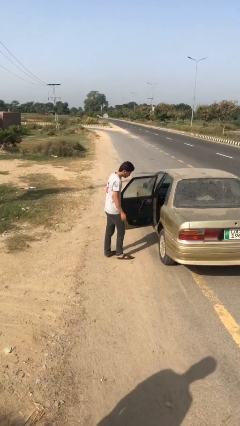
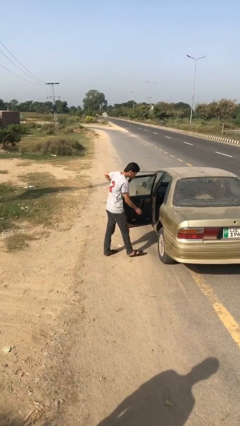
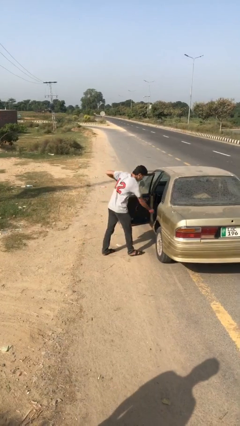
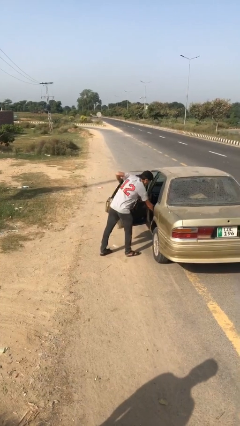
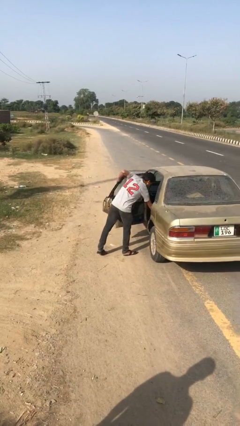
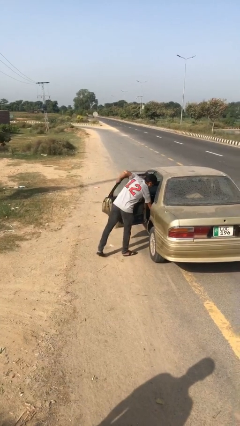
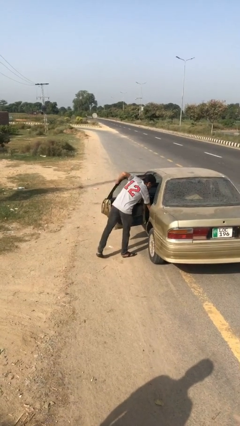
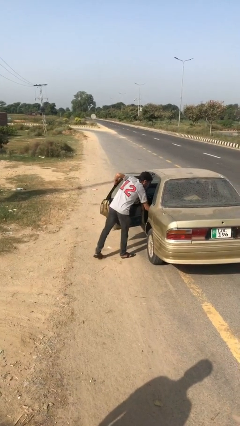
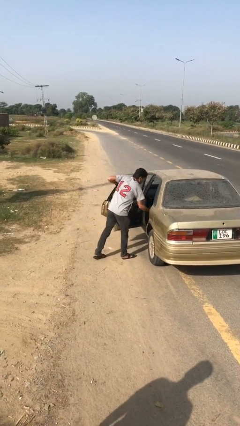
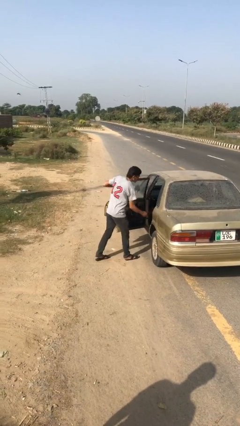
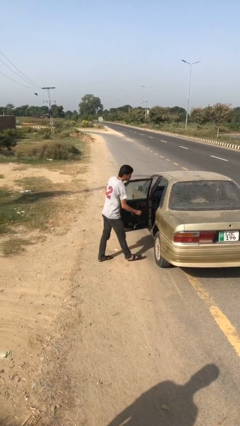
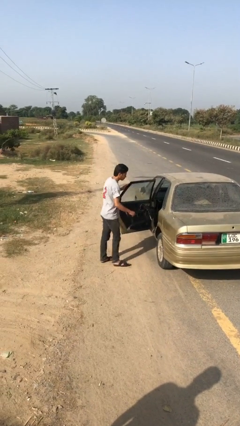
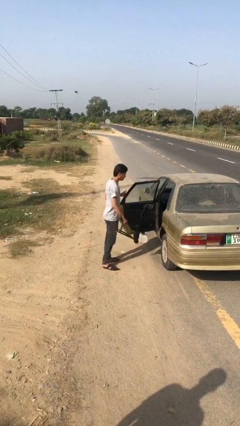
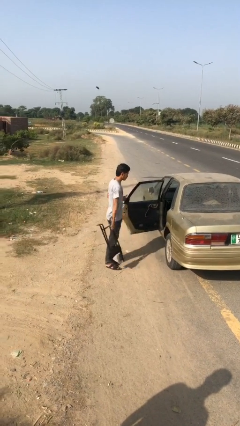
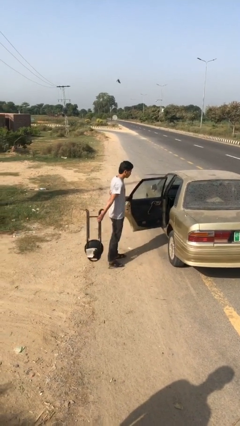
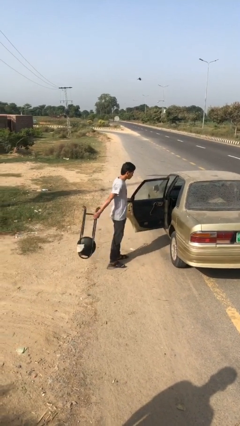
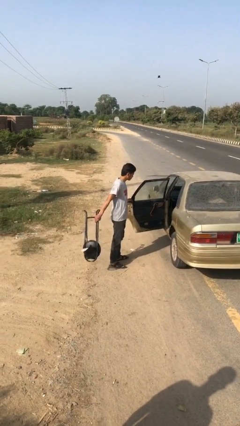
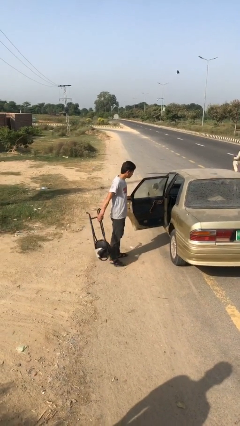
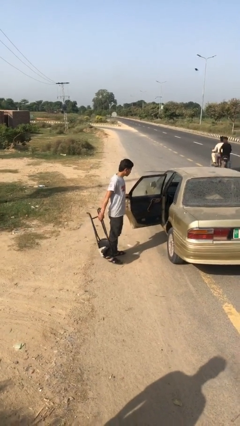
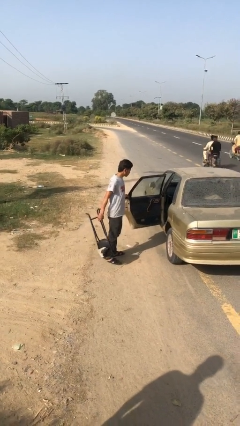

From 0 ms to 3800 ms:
person unloads car

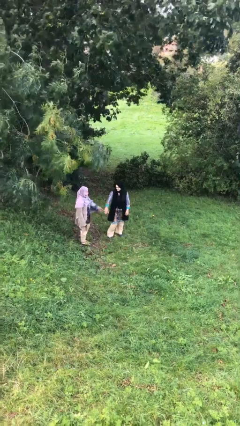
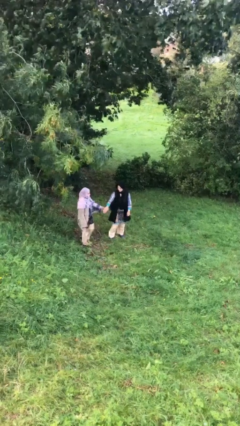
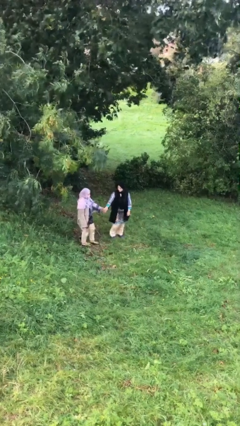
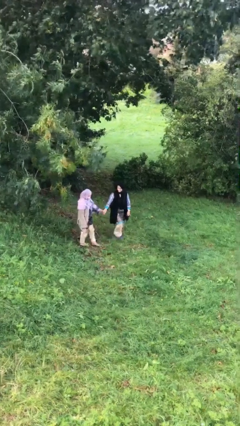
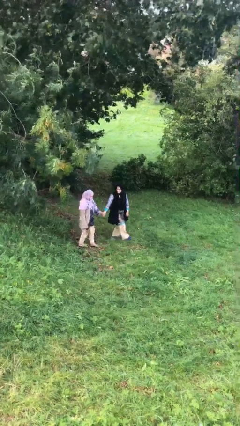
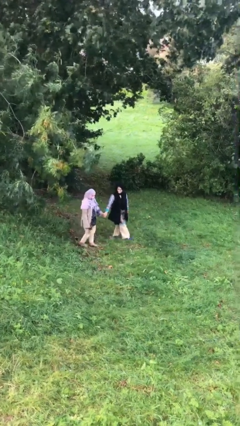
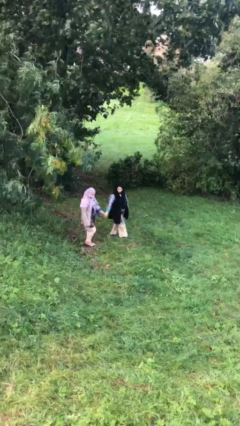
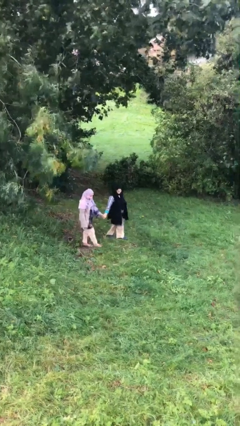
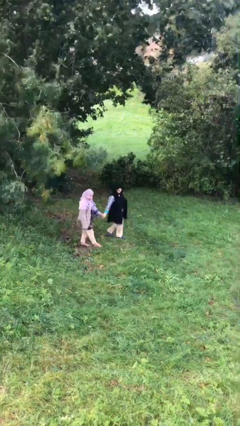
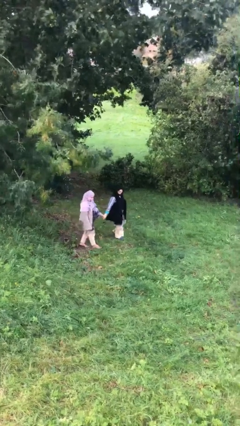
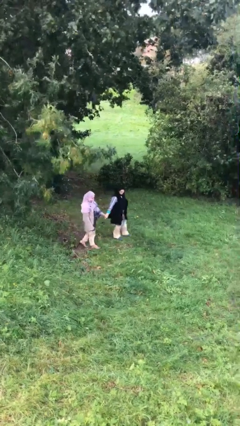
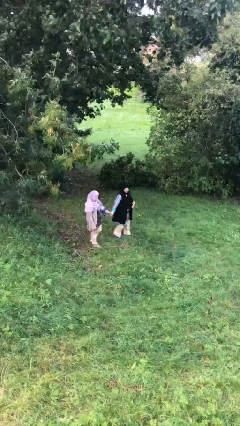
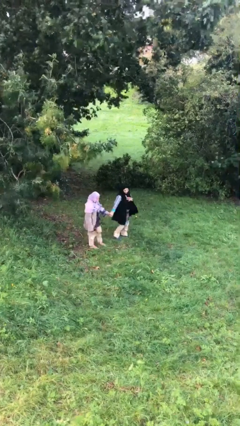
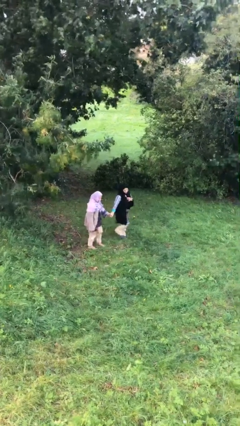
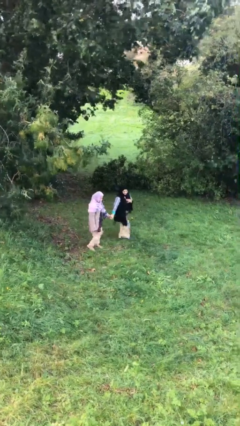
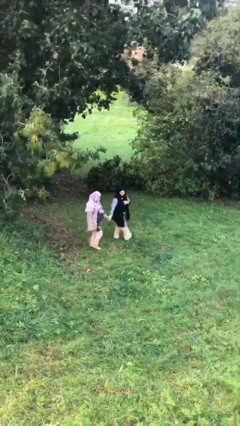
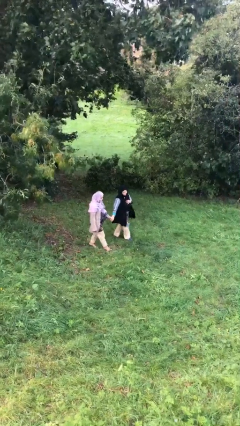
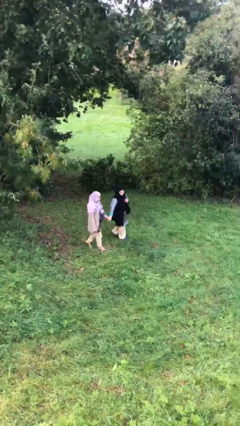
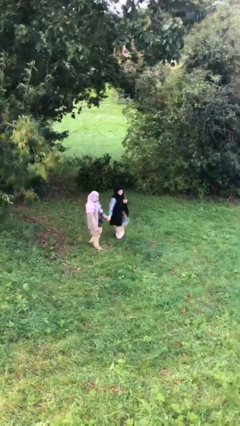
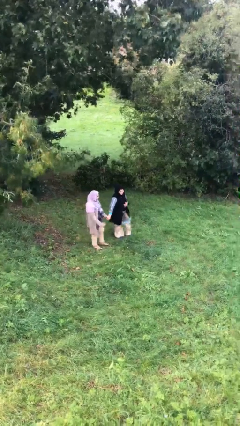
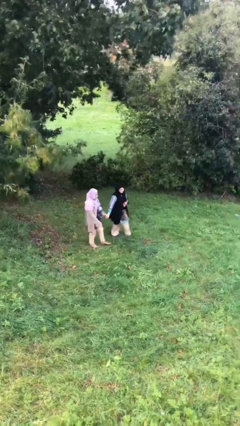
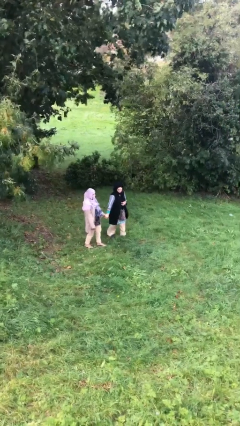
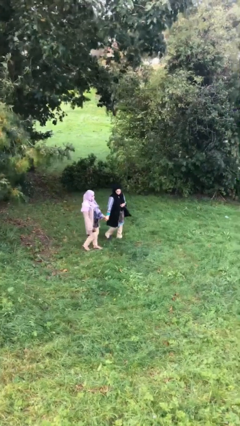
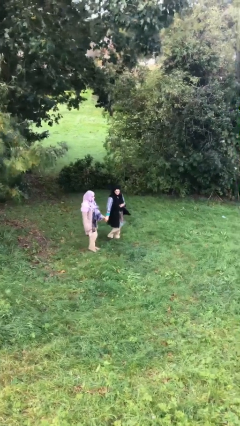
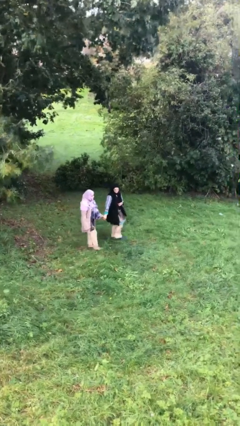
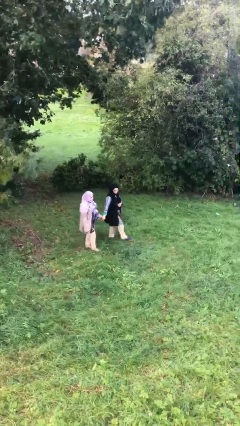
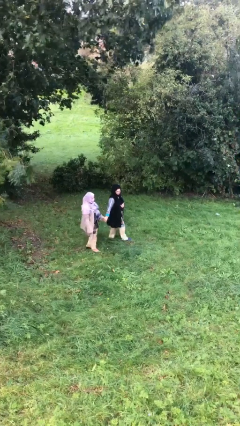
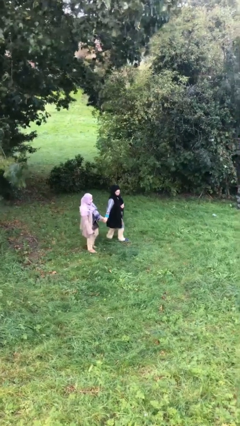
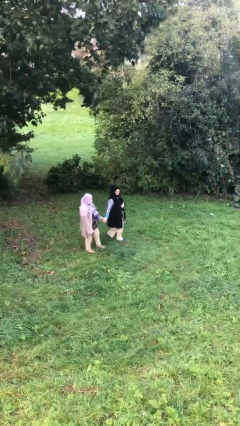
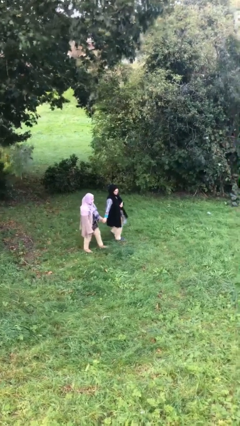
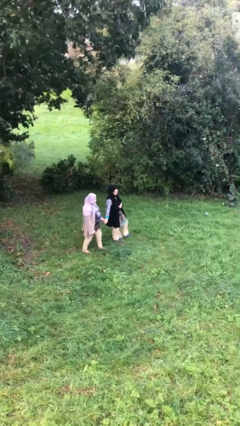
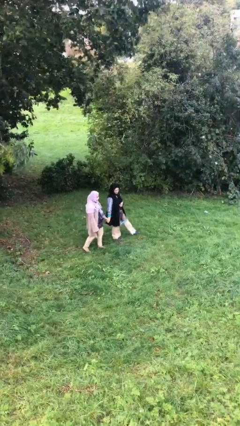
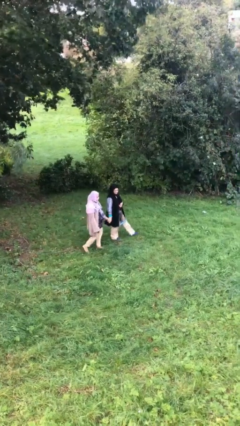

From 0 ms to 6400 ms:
person holds hand

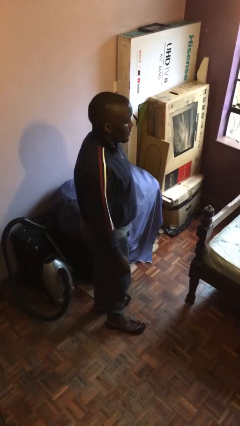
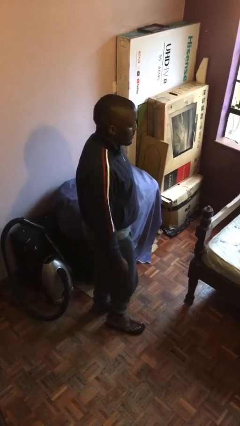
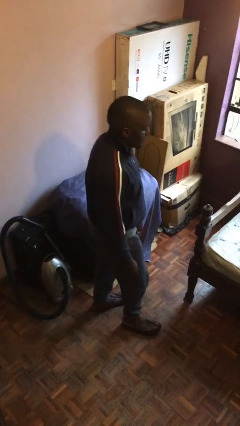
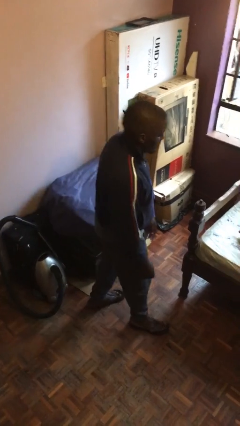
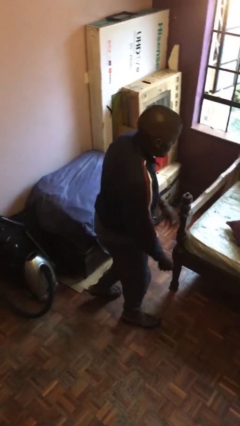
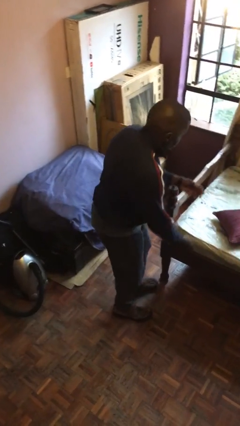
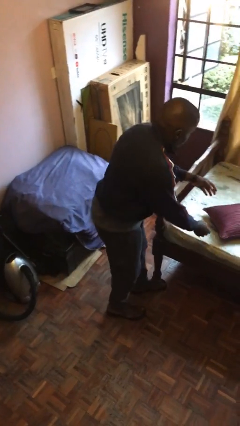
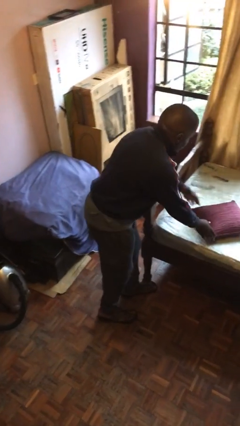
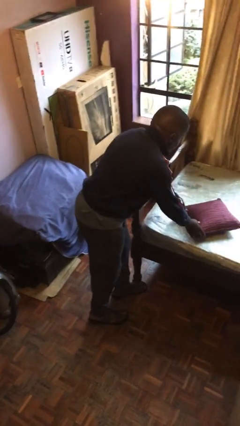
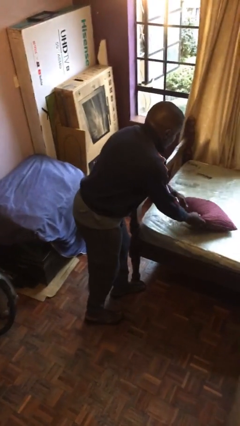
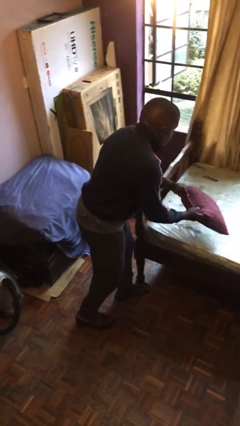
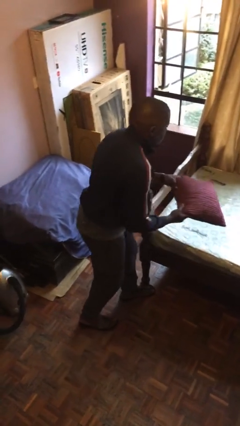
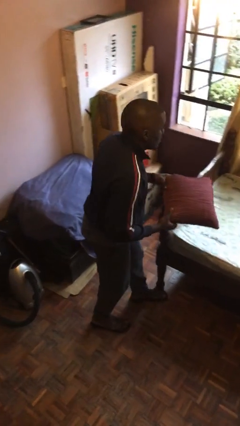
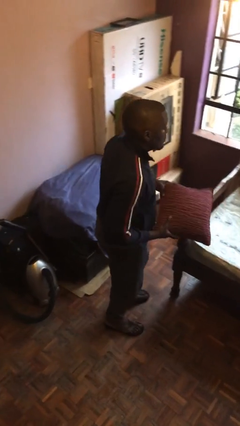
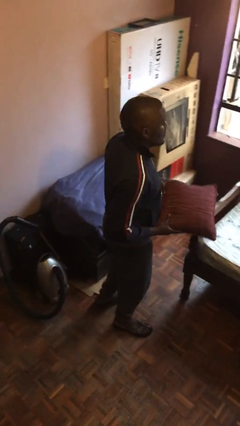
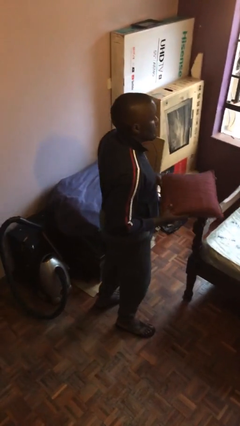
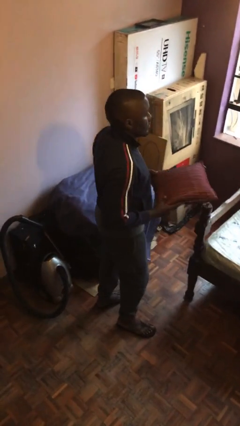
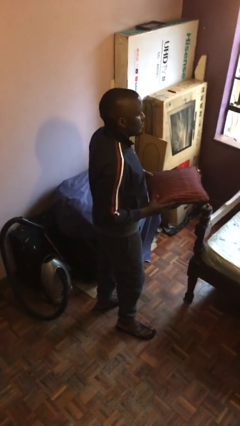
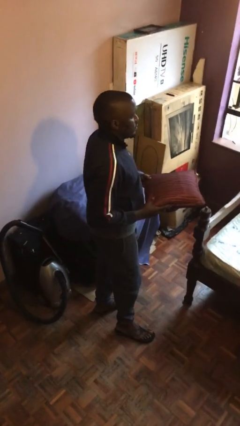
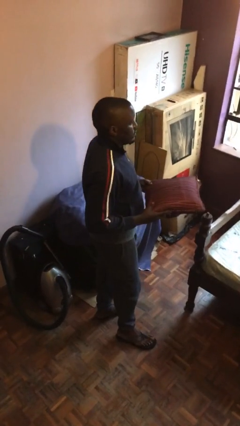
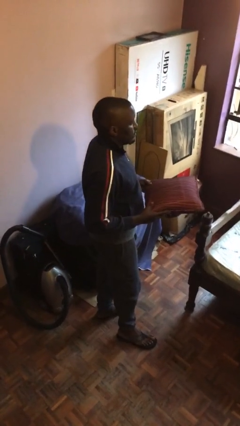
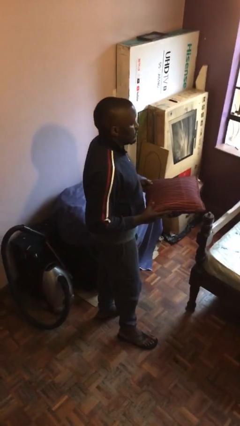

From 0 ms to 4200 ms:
person picks up object from bed

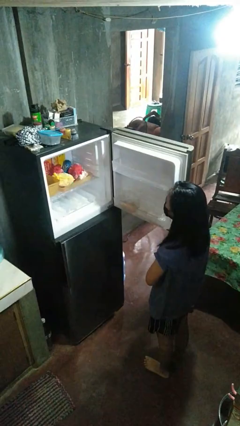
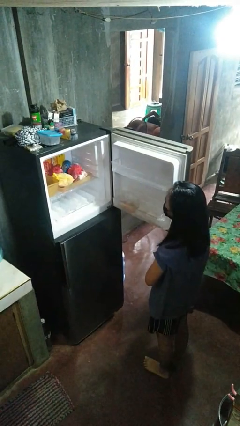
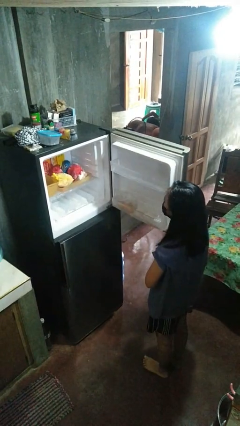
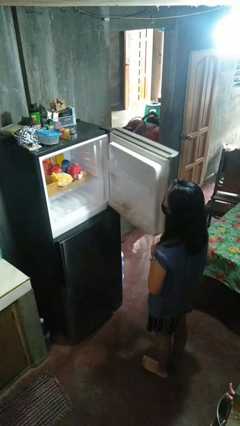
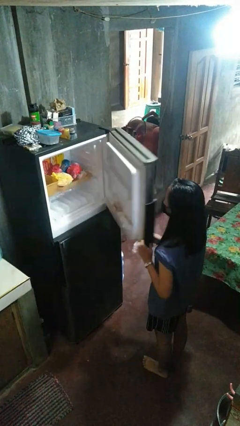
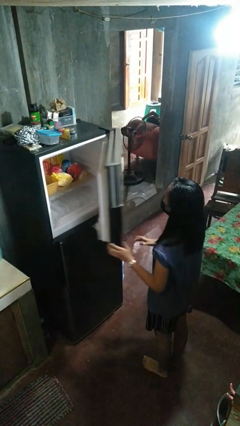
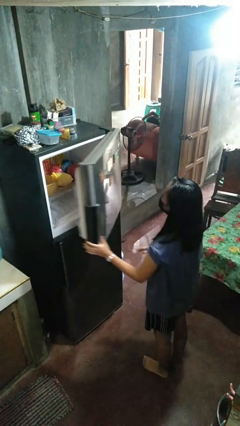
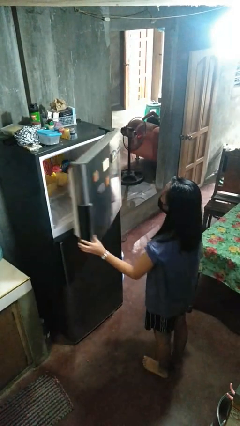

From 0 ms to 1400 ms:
person closes refrigerator

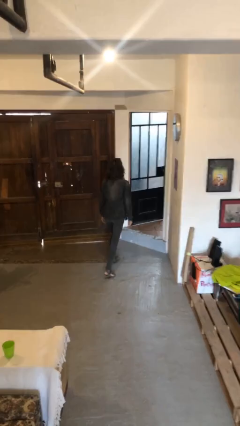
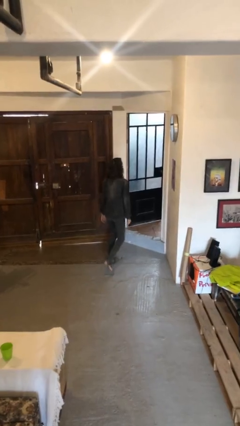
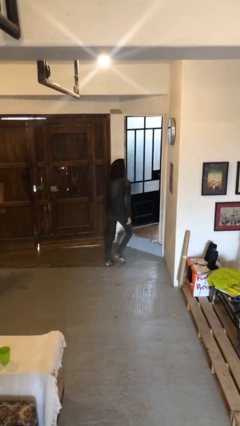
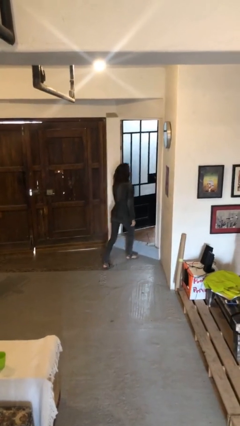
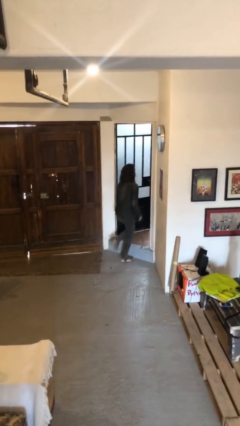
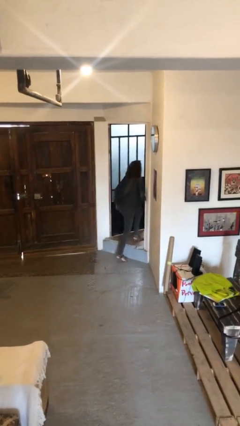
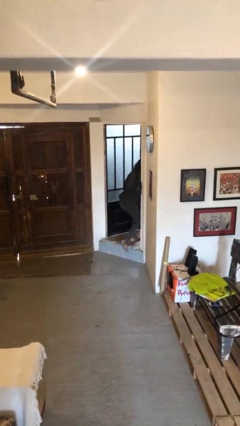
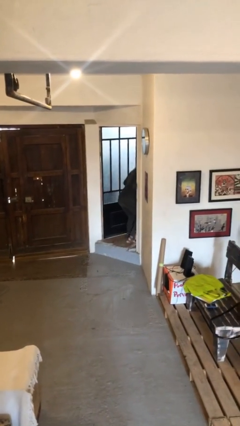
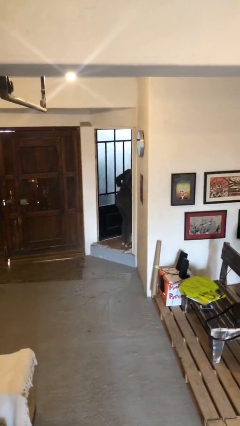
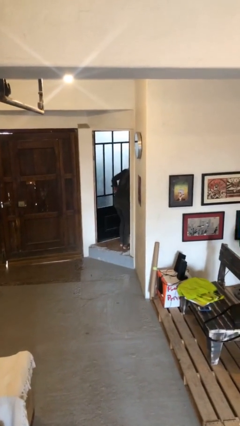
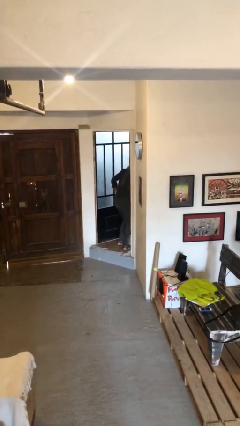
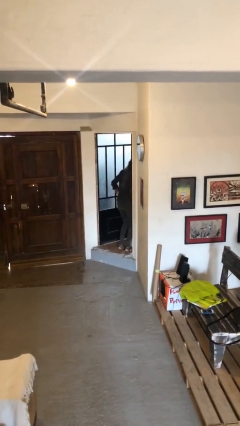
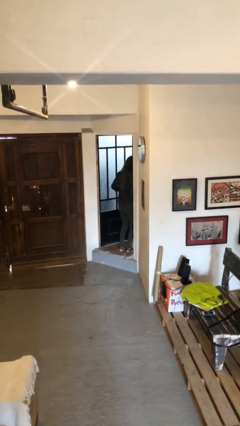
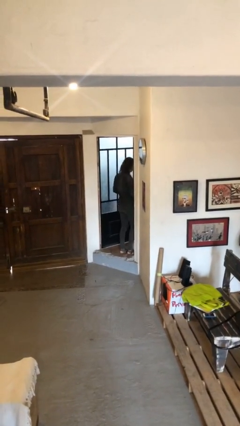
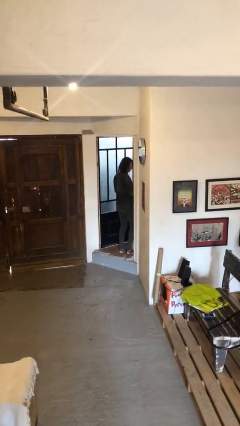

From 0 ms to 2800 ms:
person bumps into wall
